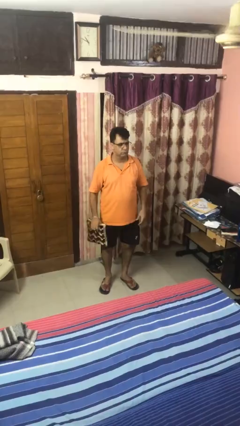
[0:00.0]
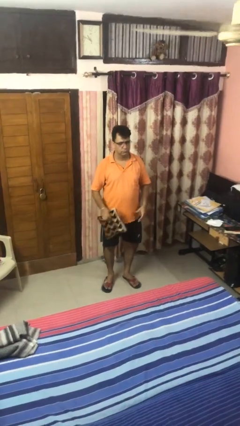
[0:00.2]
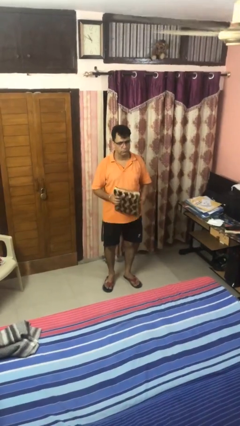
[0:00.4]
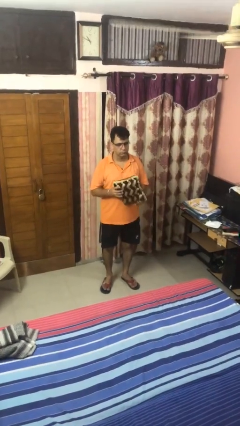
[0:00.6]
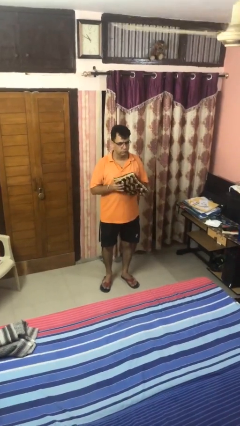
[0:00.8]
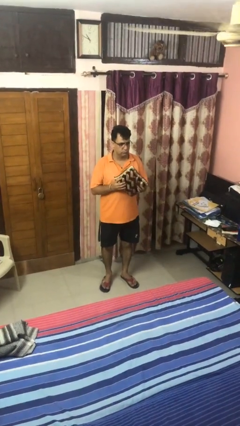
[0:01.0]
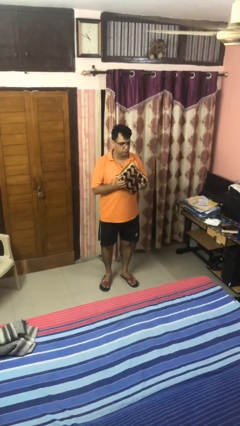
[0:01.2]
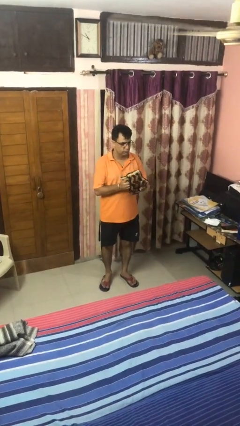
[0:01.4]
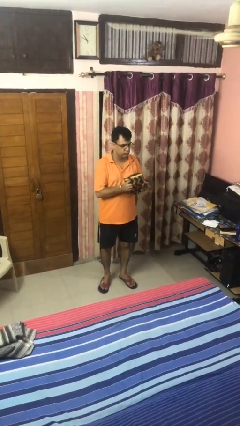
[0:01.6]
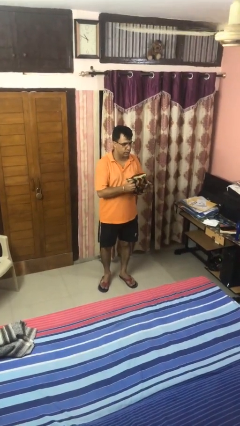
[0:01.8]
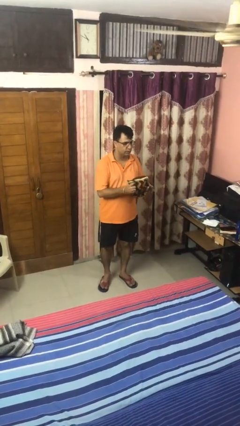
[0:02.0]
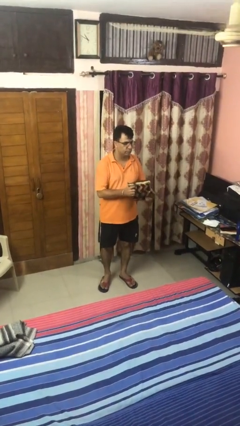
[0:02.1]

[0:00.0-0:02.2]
person squeezes object

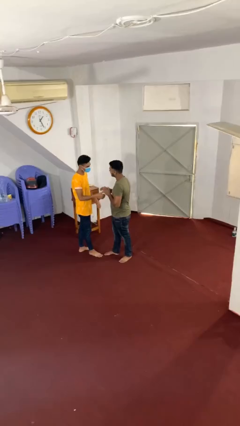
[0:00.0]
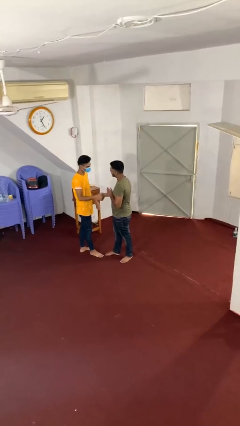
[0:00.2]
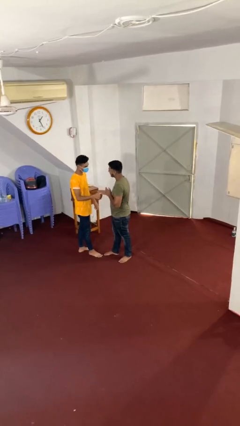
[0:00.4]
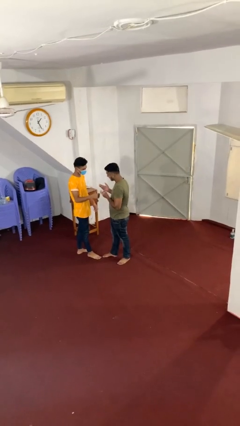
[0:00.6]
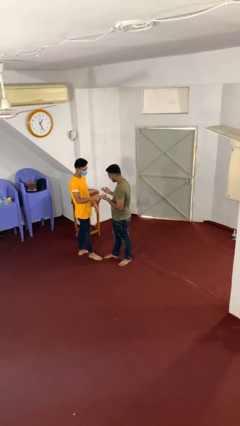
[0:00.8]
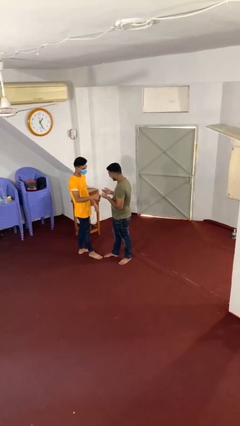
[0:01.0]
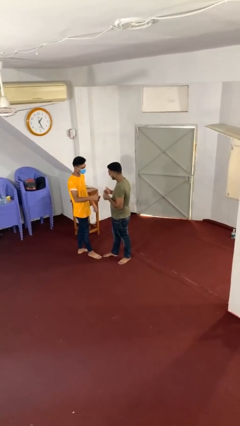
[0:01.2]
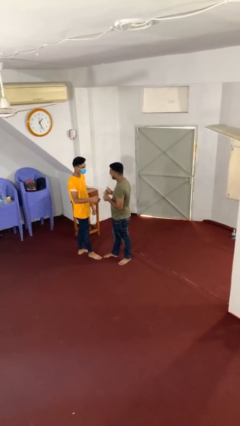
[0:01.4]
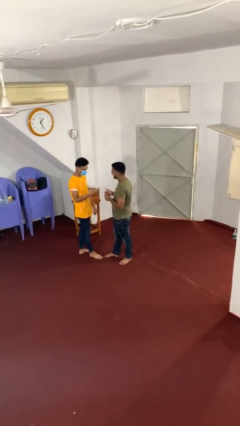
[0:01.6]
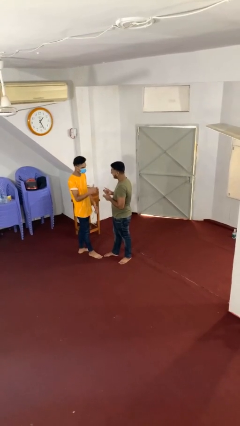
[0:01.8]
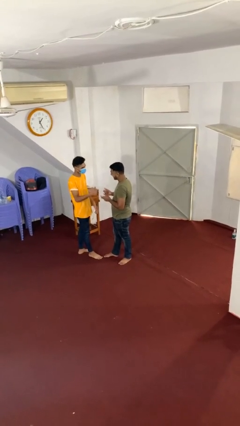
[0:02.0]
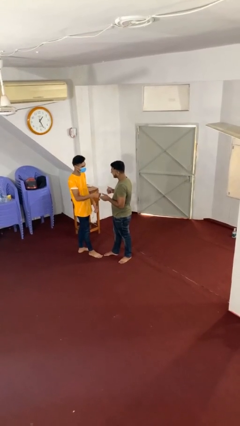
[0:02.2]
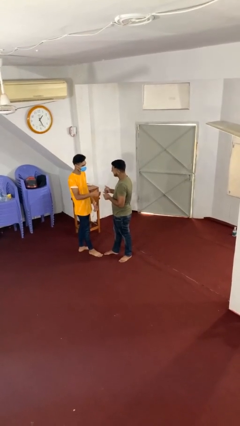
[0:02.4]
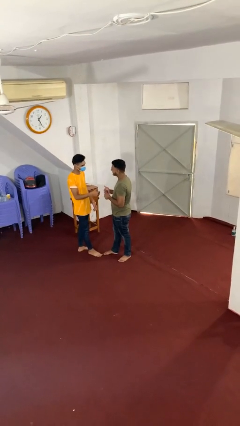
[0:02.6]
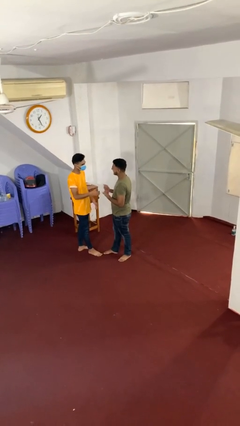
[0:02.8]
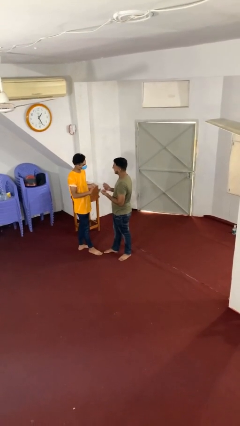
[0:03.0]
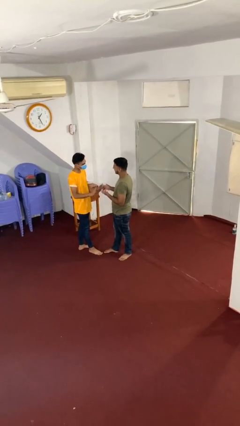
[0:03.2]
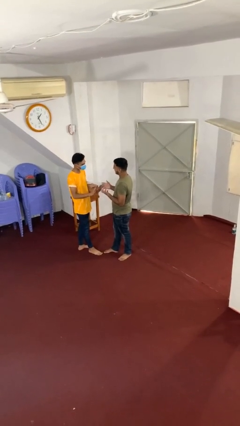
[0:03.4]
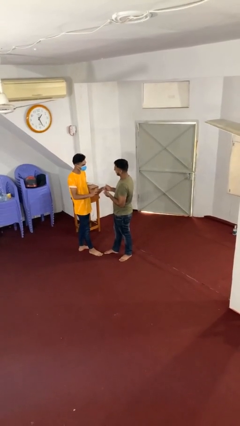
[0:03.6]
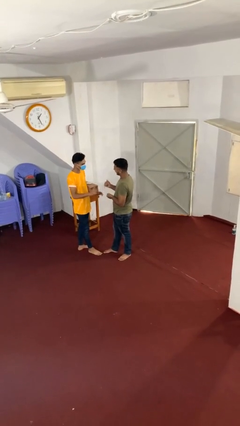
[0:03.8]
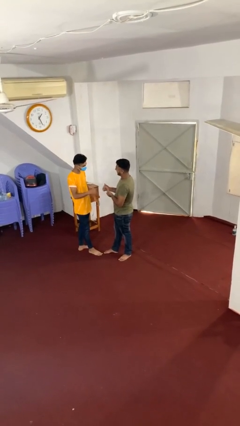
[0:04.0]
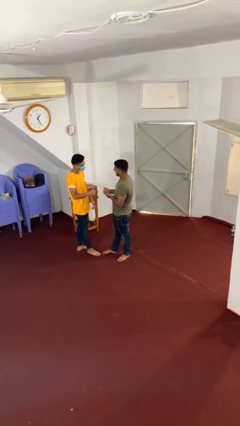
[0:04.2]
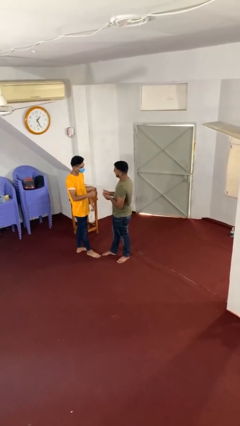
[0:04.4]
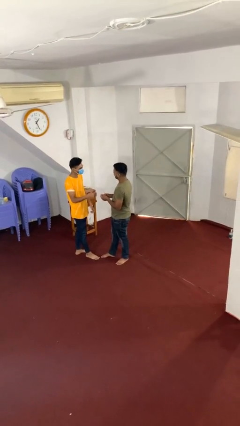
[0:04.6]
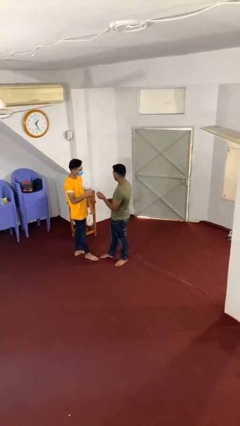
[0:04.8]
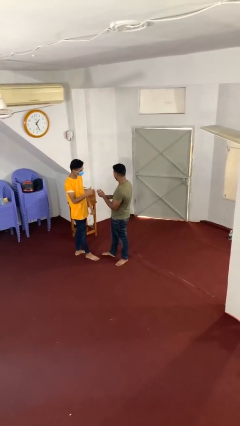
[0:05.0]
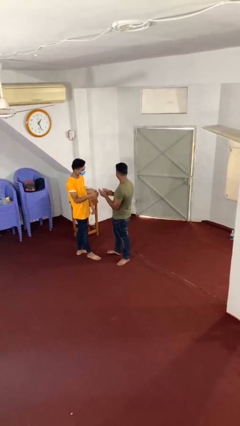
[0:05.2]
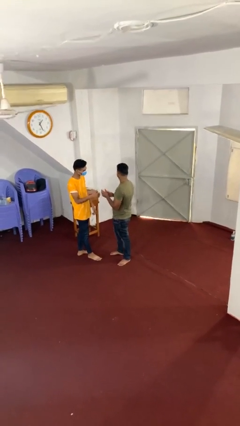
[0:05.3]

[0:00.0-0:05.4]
person talks to person

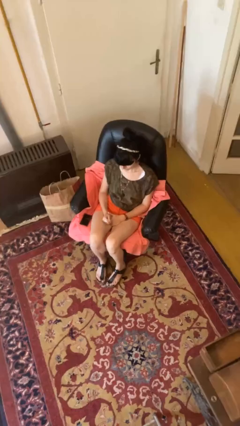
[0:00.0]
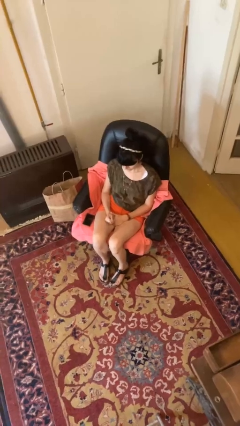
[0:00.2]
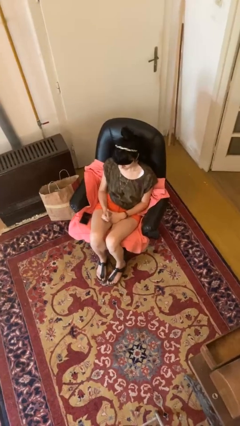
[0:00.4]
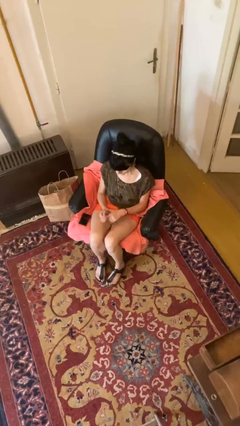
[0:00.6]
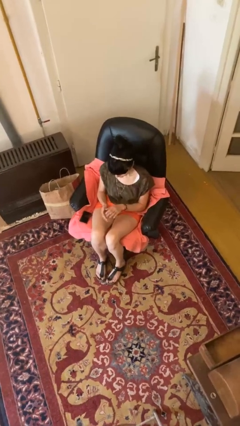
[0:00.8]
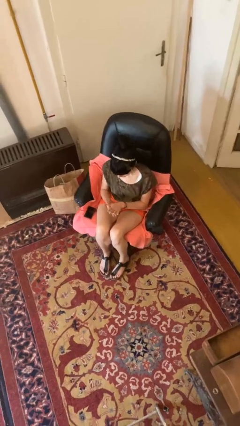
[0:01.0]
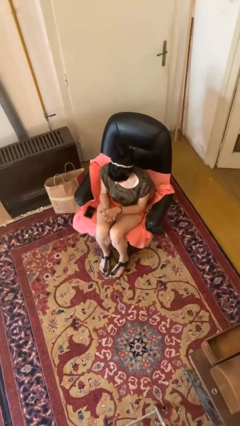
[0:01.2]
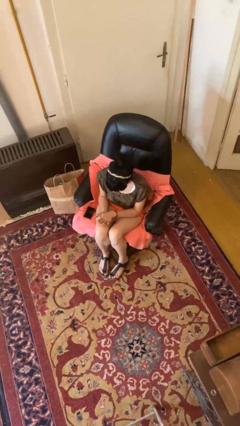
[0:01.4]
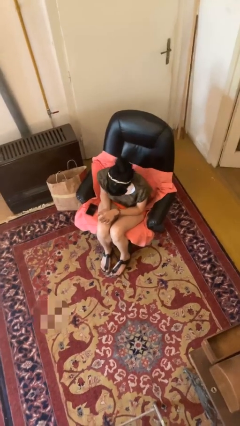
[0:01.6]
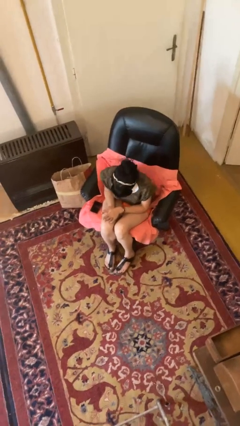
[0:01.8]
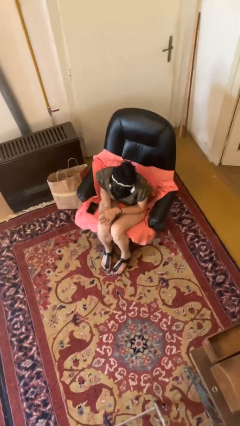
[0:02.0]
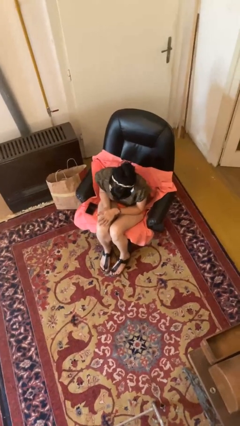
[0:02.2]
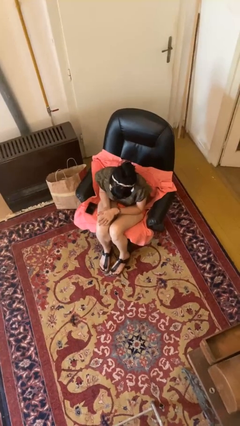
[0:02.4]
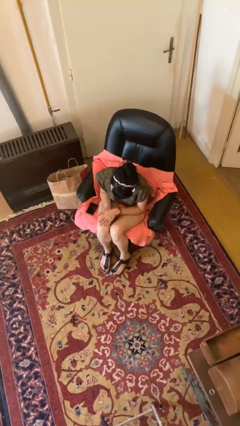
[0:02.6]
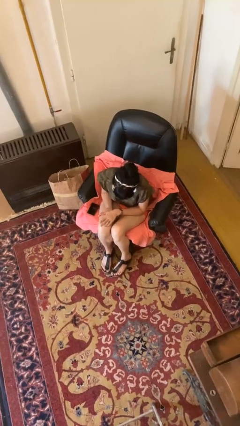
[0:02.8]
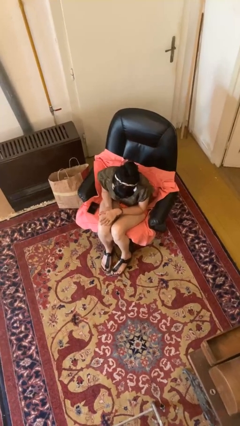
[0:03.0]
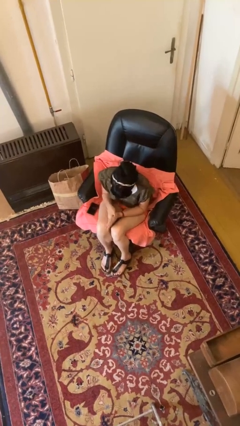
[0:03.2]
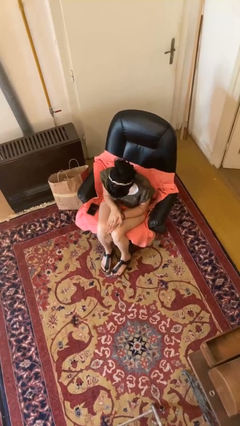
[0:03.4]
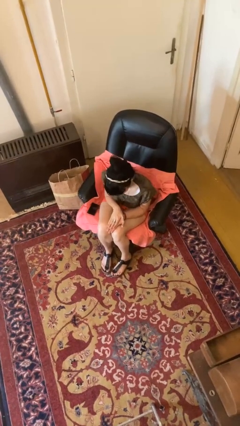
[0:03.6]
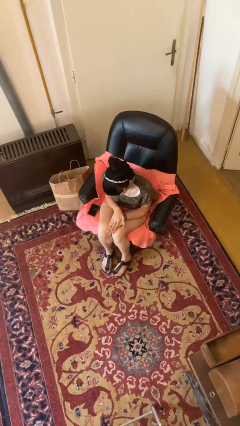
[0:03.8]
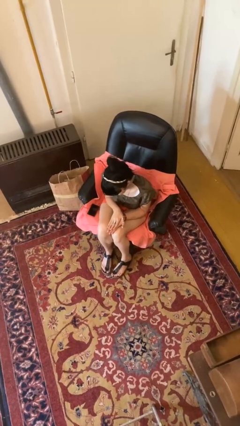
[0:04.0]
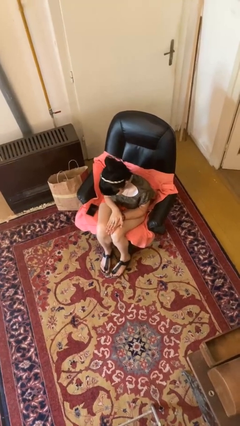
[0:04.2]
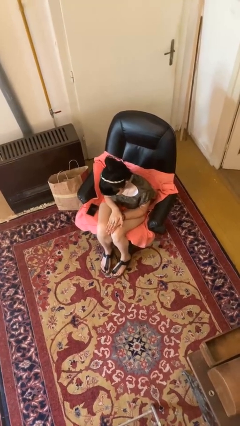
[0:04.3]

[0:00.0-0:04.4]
person looks at hands in lap

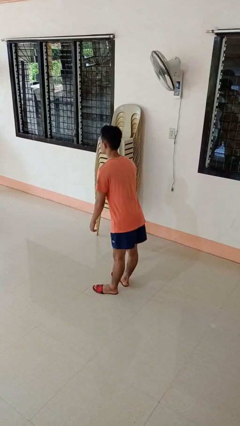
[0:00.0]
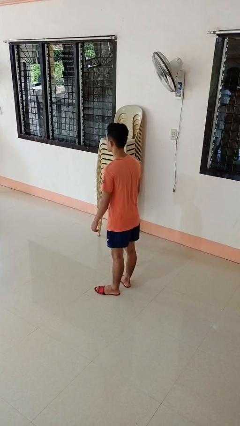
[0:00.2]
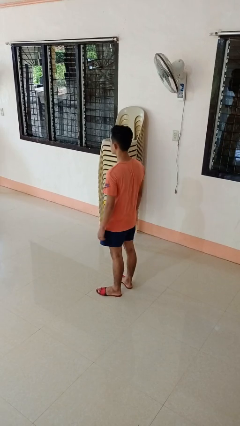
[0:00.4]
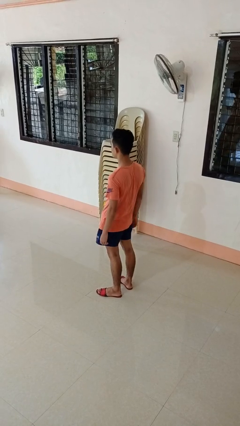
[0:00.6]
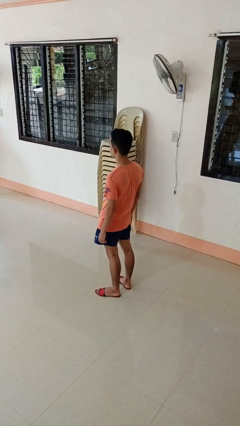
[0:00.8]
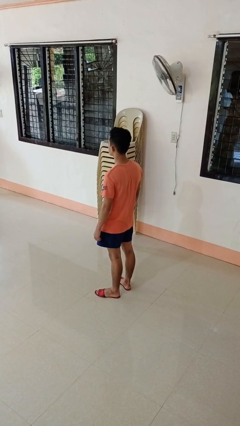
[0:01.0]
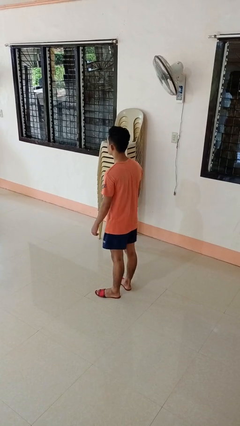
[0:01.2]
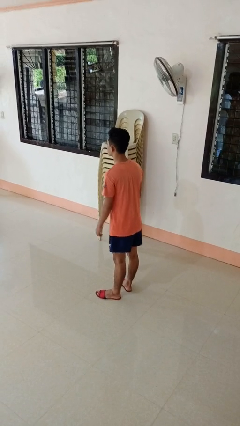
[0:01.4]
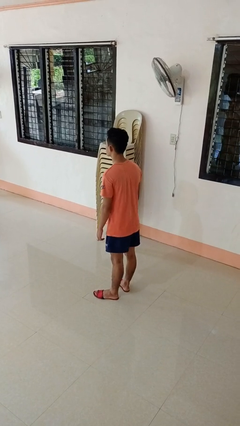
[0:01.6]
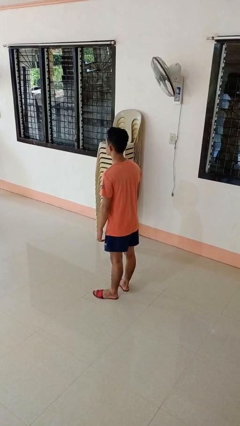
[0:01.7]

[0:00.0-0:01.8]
person wiggles hips

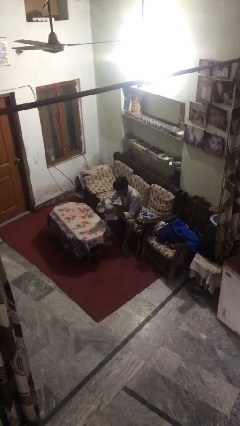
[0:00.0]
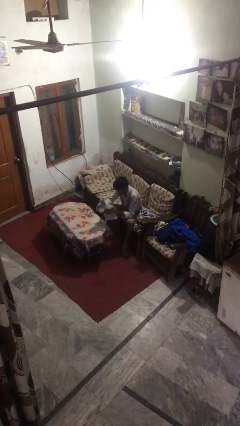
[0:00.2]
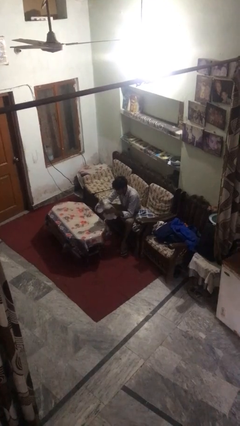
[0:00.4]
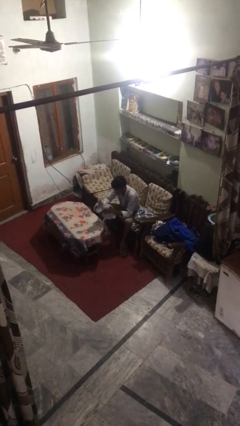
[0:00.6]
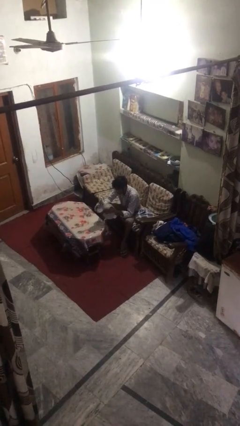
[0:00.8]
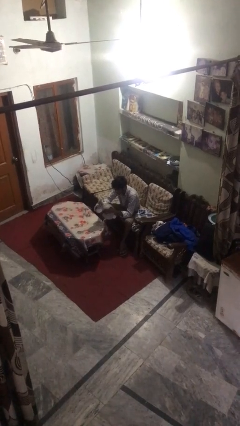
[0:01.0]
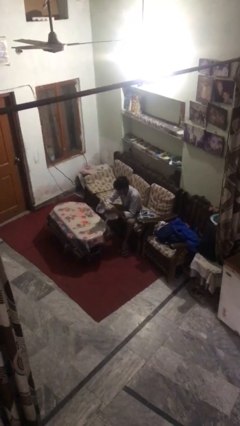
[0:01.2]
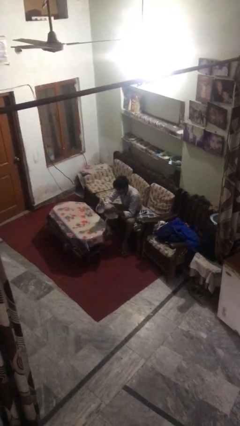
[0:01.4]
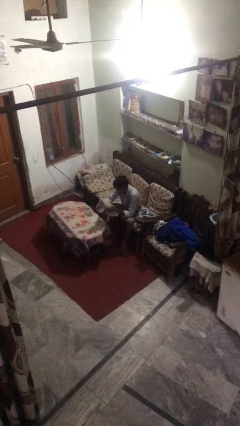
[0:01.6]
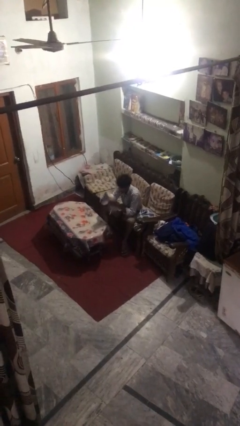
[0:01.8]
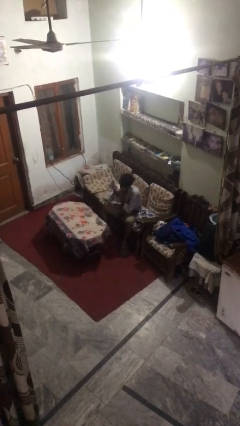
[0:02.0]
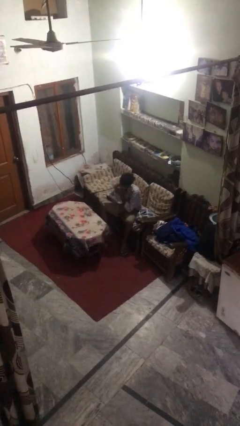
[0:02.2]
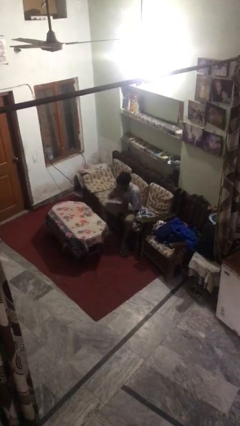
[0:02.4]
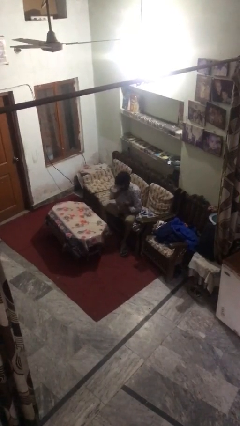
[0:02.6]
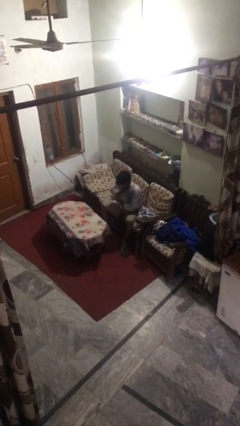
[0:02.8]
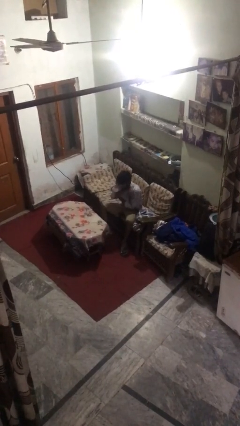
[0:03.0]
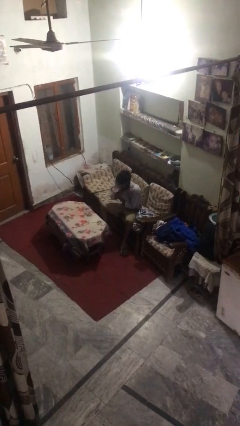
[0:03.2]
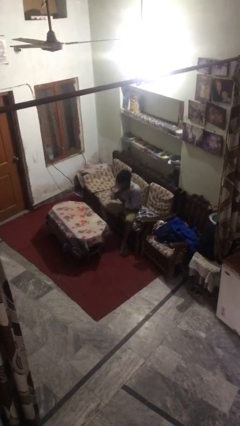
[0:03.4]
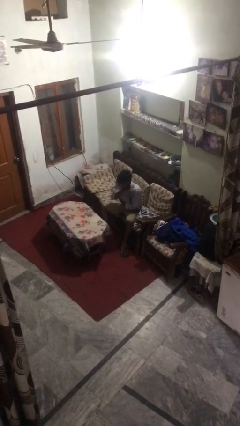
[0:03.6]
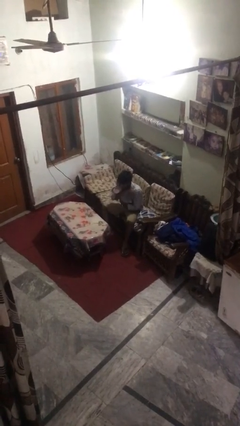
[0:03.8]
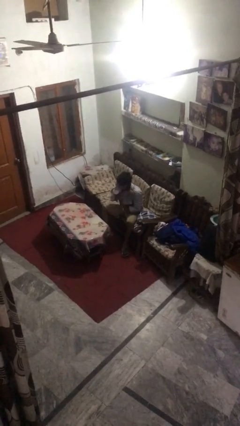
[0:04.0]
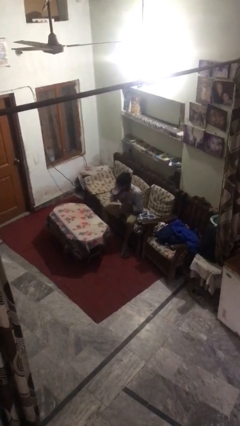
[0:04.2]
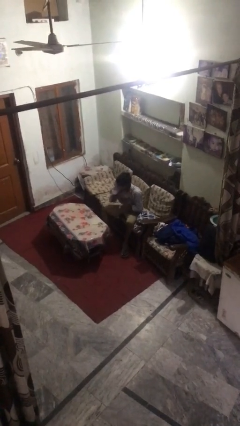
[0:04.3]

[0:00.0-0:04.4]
person hugs stuffed animal
